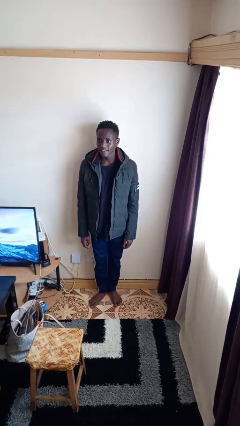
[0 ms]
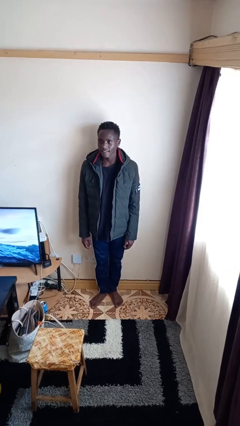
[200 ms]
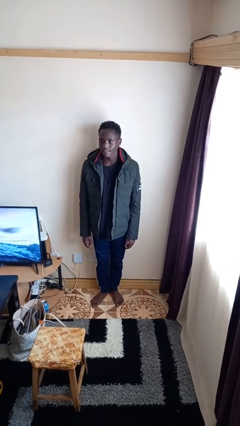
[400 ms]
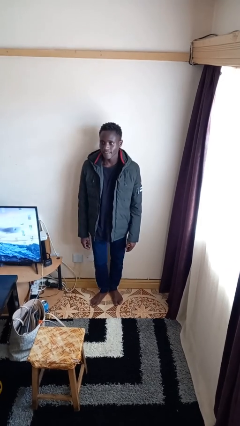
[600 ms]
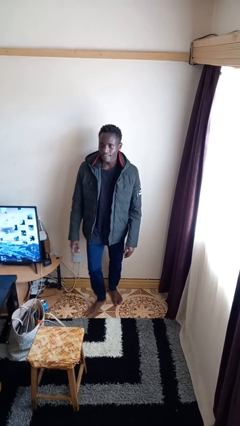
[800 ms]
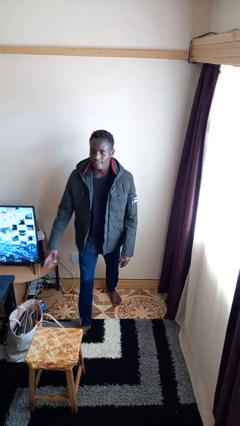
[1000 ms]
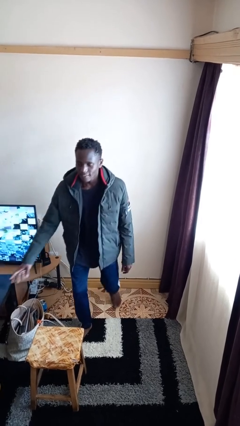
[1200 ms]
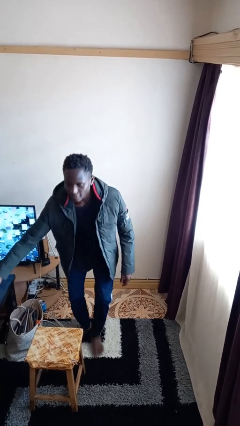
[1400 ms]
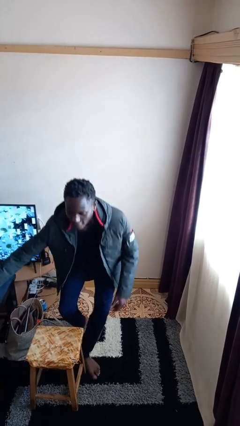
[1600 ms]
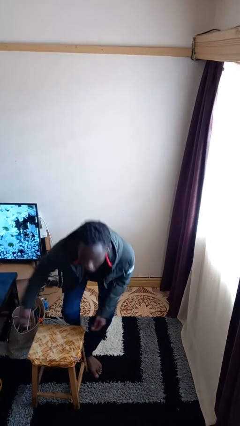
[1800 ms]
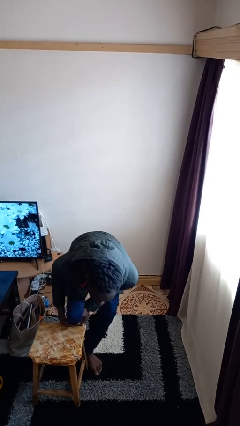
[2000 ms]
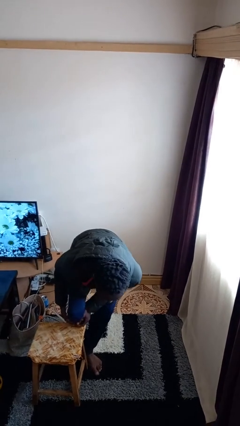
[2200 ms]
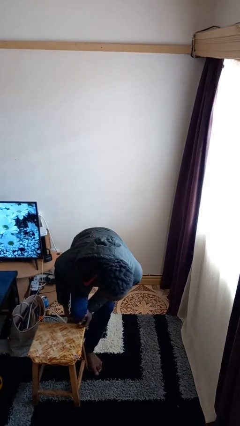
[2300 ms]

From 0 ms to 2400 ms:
person trips on object on floor

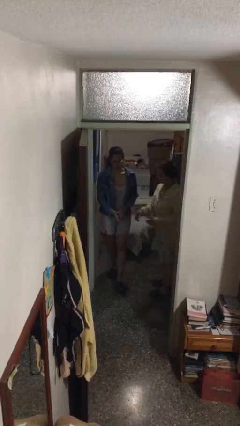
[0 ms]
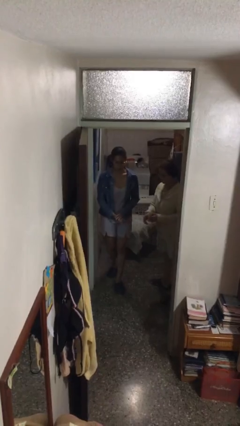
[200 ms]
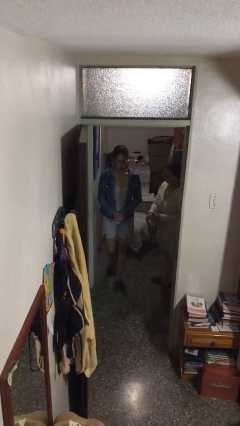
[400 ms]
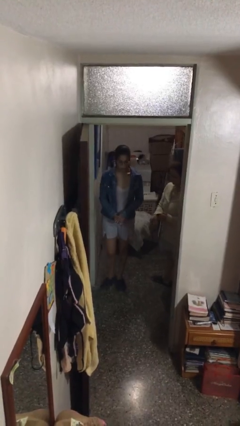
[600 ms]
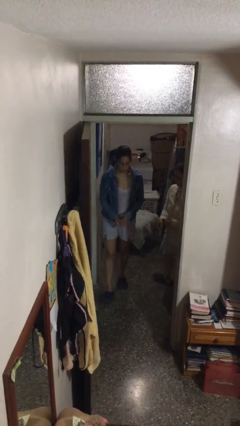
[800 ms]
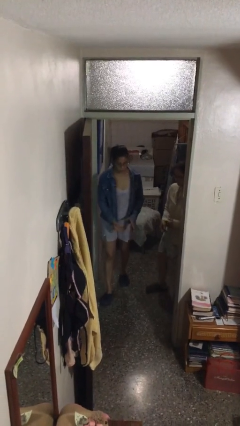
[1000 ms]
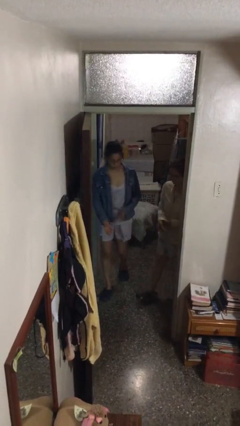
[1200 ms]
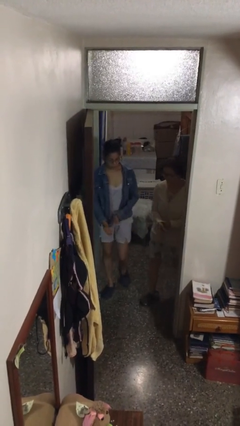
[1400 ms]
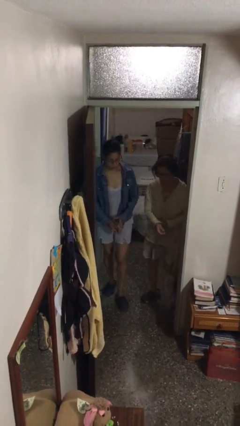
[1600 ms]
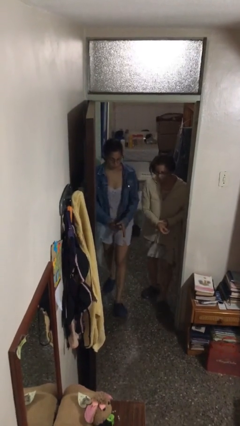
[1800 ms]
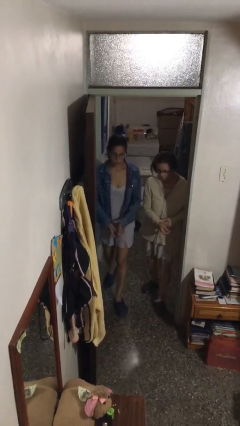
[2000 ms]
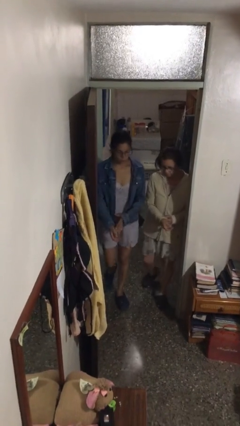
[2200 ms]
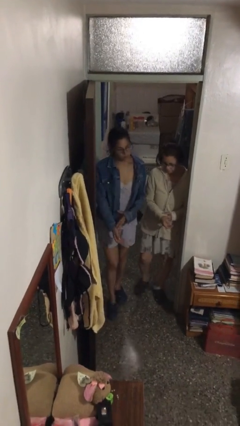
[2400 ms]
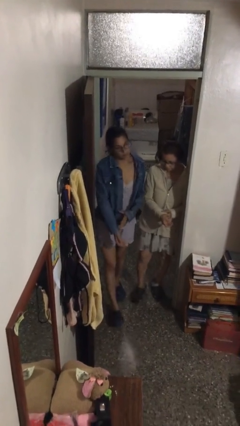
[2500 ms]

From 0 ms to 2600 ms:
person talks to person

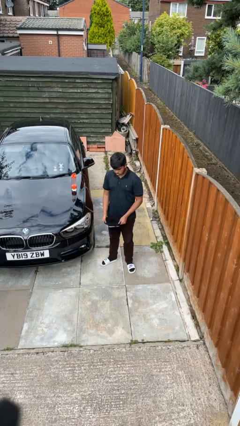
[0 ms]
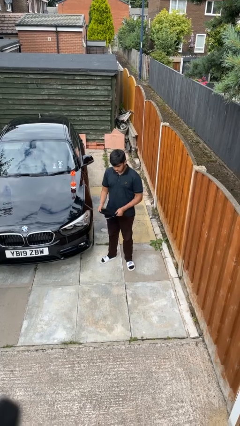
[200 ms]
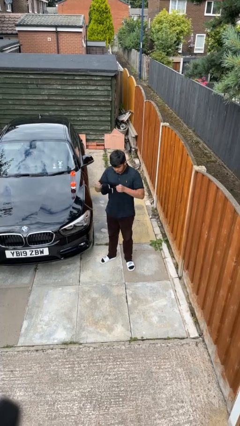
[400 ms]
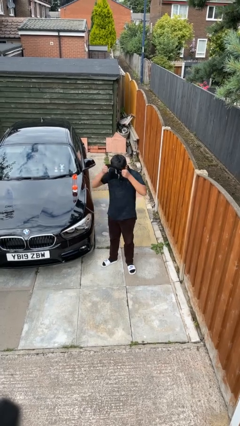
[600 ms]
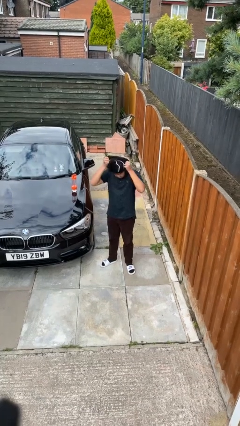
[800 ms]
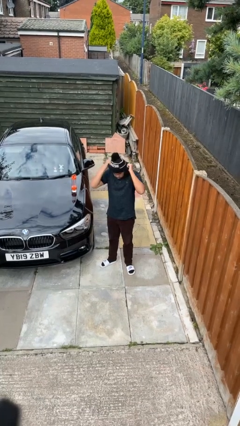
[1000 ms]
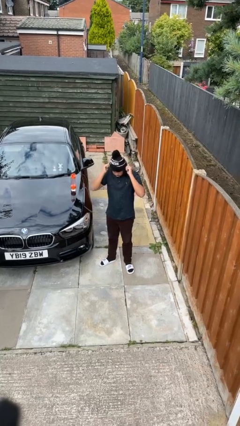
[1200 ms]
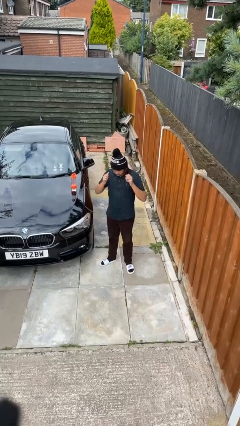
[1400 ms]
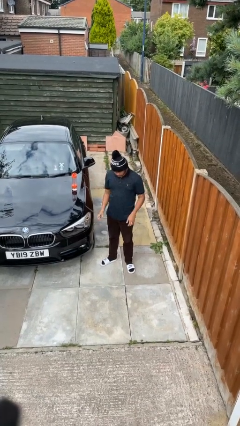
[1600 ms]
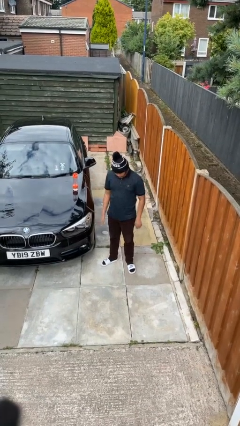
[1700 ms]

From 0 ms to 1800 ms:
person puts on hat

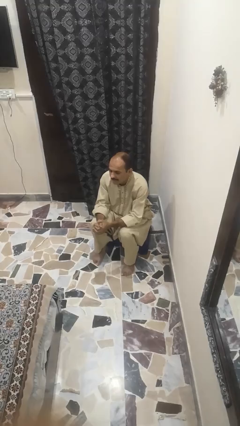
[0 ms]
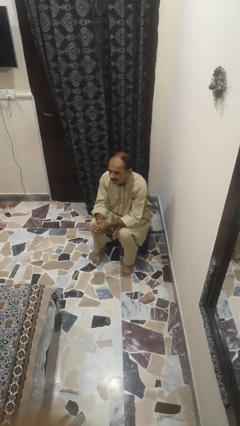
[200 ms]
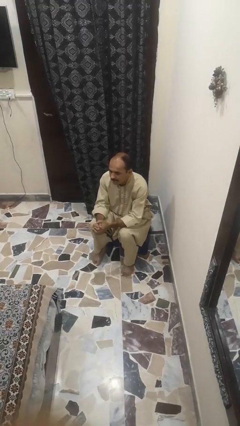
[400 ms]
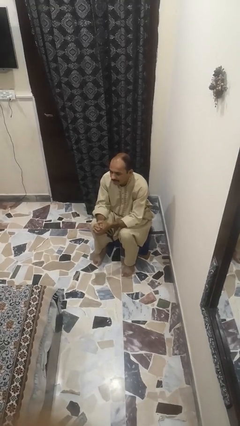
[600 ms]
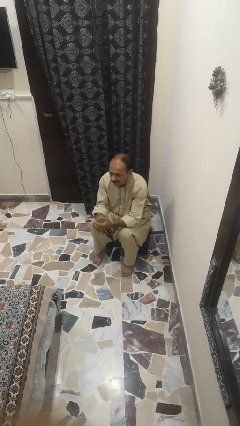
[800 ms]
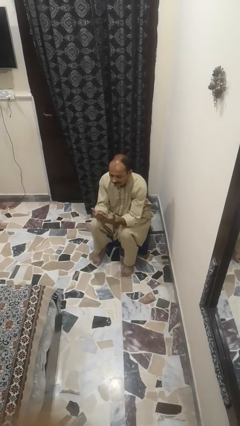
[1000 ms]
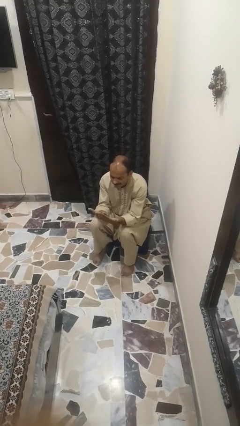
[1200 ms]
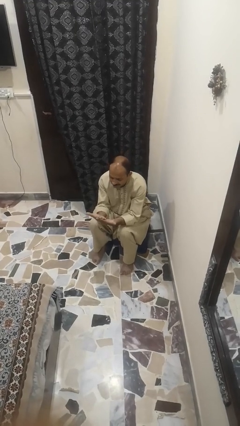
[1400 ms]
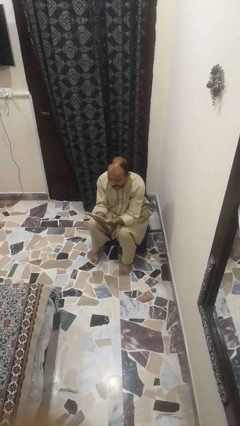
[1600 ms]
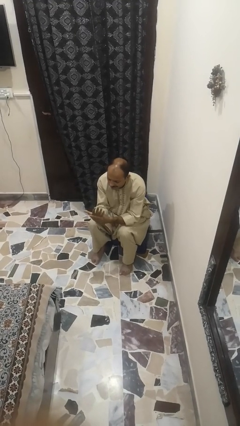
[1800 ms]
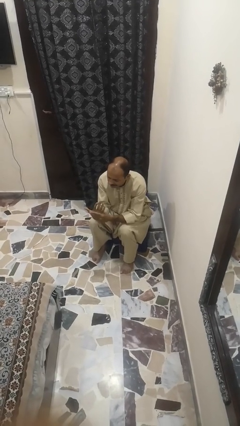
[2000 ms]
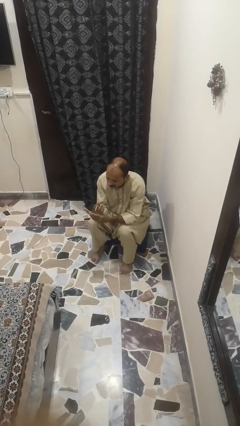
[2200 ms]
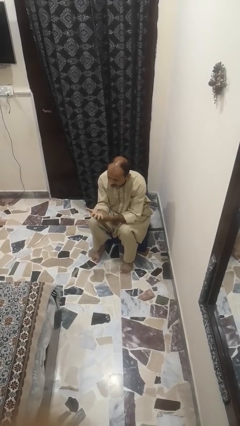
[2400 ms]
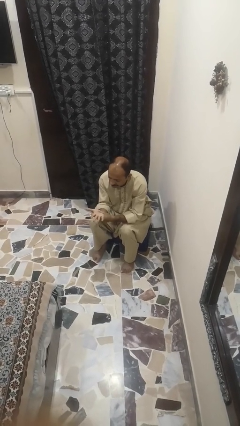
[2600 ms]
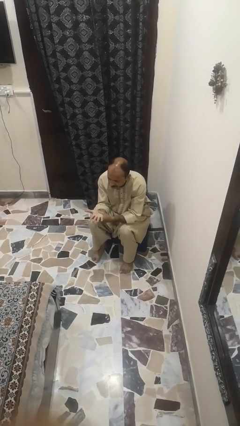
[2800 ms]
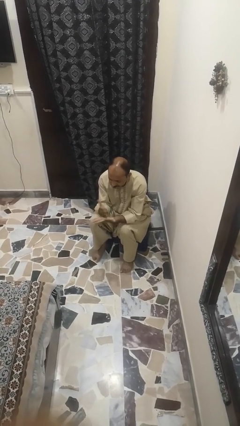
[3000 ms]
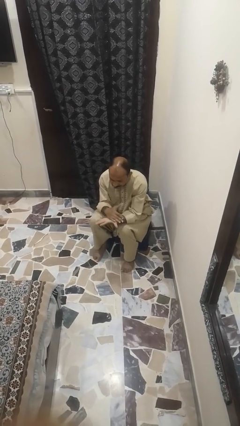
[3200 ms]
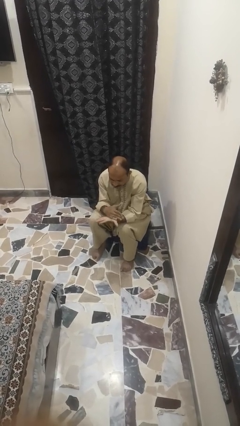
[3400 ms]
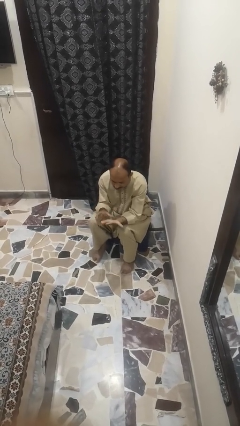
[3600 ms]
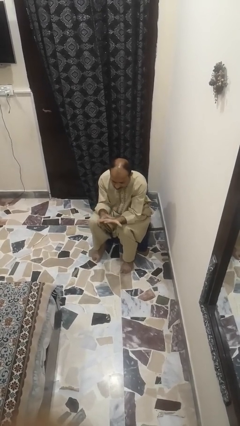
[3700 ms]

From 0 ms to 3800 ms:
person looks at hands in lap

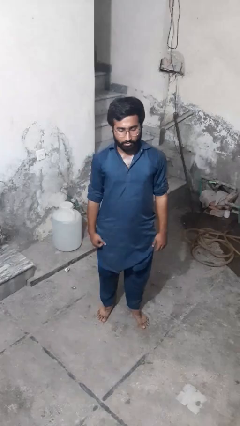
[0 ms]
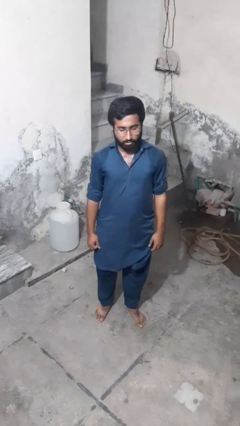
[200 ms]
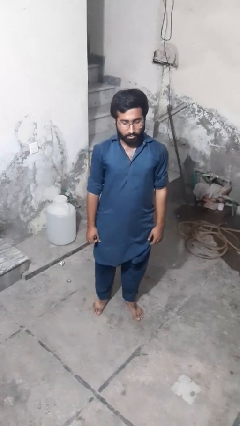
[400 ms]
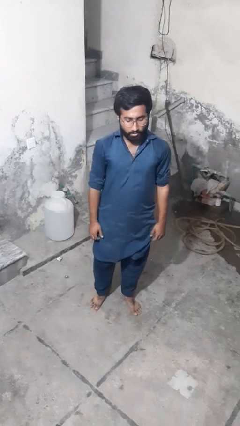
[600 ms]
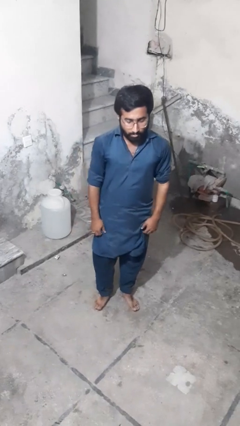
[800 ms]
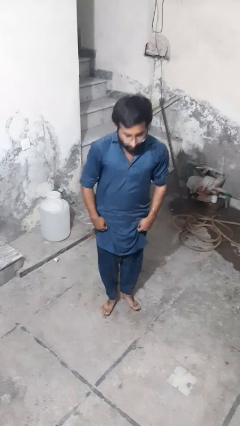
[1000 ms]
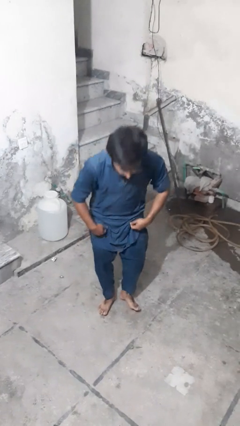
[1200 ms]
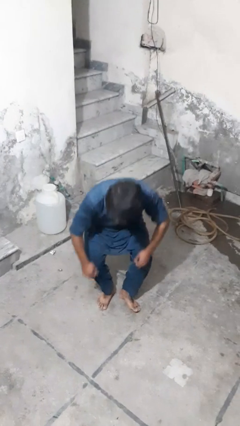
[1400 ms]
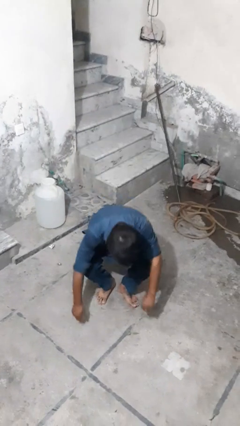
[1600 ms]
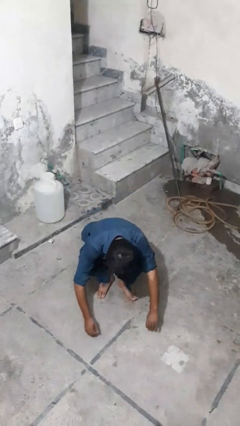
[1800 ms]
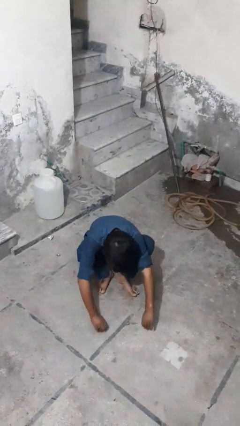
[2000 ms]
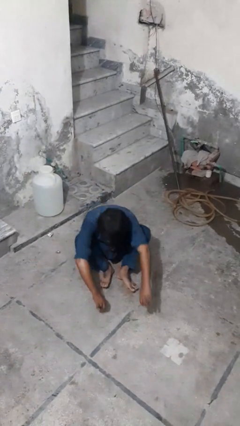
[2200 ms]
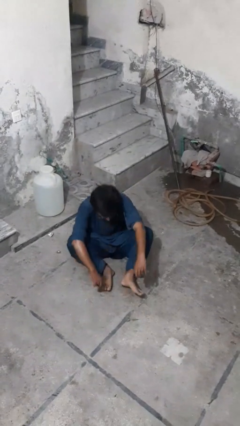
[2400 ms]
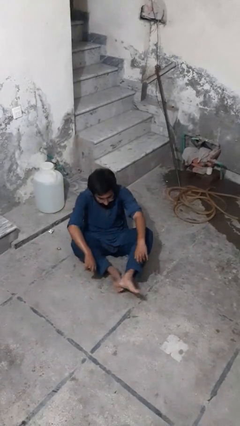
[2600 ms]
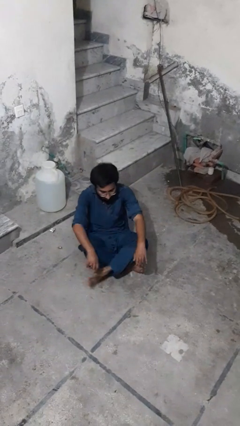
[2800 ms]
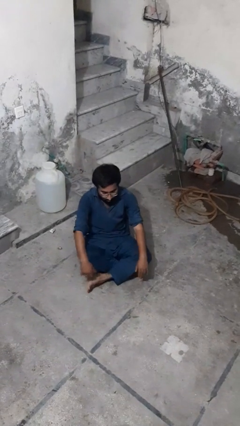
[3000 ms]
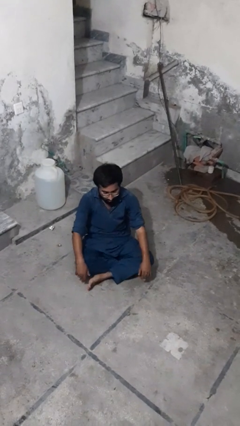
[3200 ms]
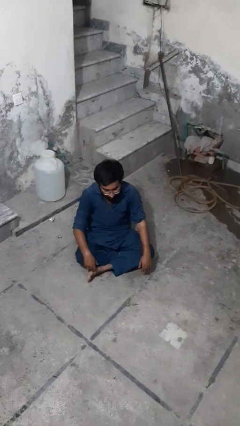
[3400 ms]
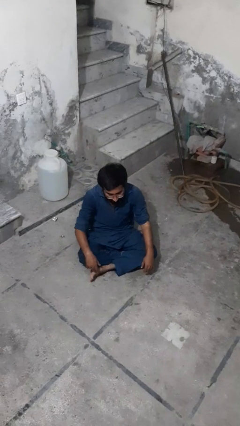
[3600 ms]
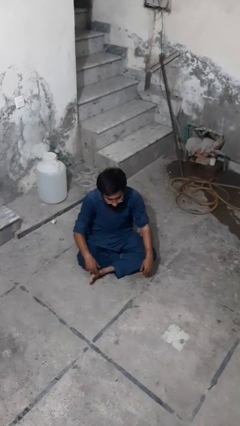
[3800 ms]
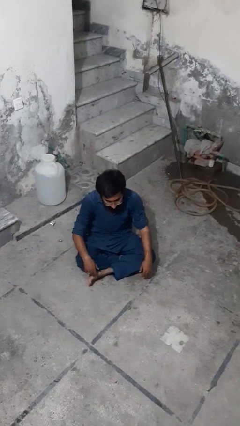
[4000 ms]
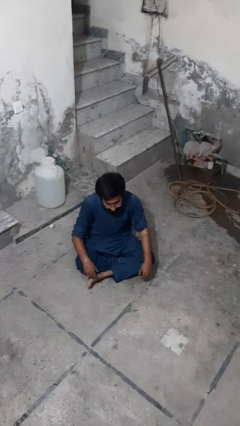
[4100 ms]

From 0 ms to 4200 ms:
person sits crisscross

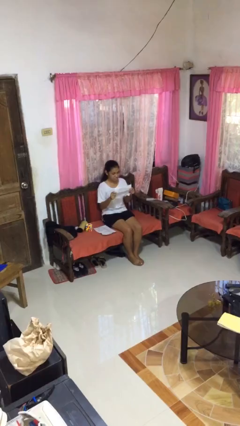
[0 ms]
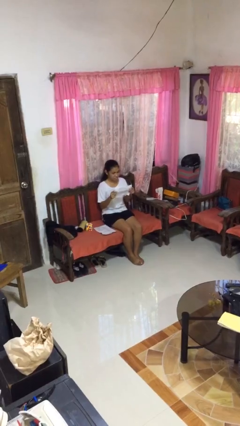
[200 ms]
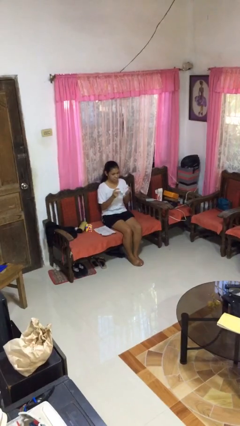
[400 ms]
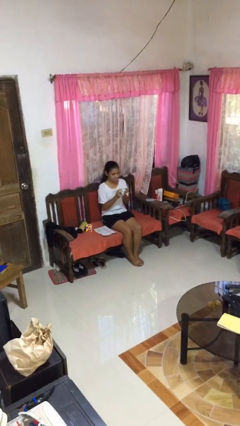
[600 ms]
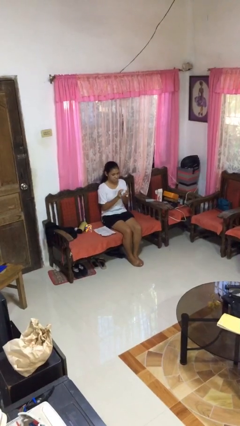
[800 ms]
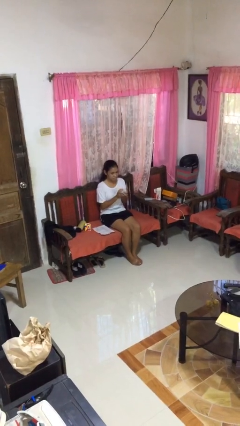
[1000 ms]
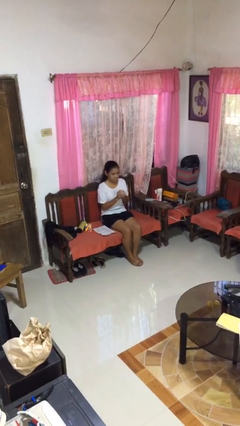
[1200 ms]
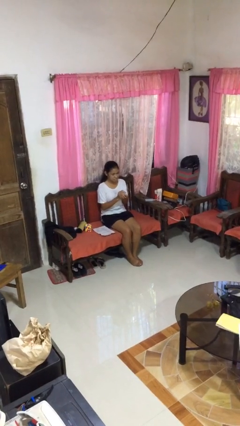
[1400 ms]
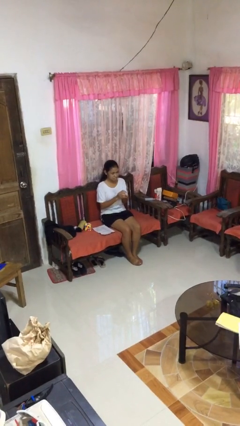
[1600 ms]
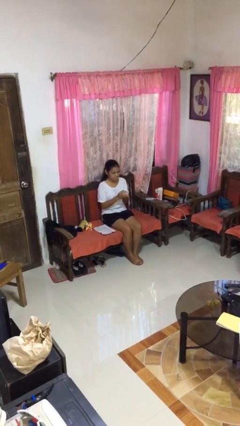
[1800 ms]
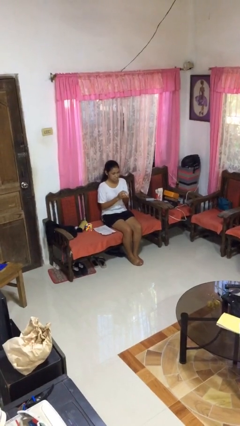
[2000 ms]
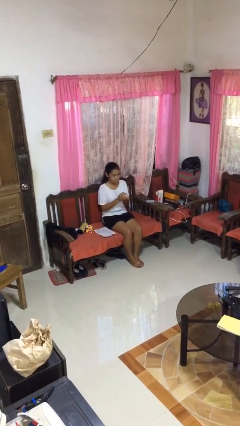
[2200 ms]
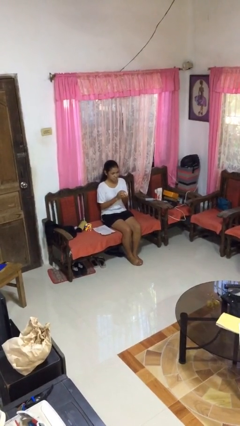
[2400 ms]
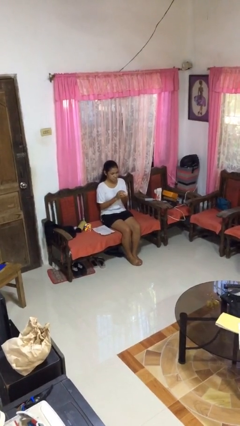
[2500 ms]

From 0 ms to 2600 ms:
person crumples paper

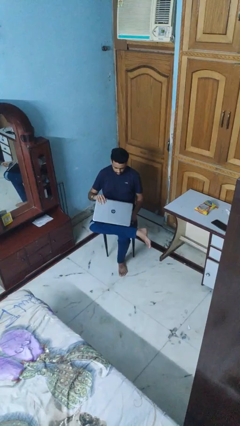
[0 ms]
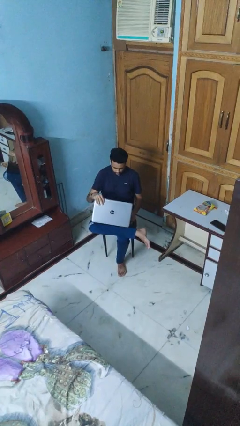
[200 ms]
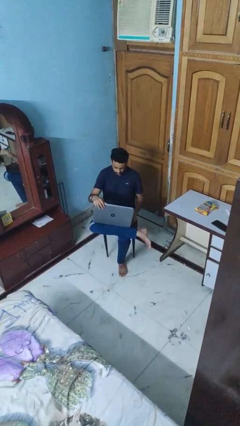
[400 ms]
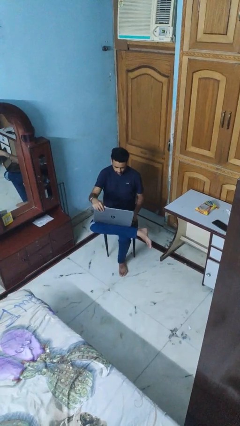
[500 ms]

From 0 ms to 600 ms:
person opens laptop
